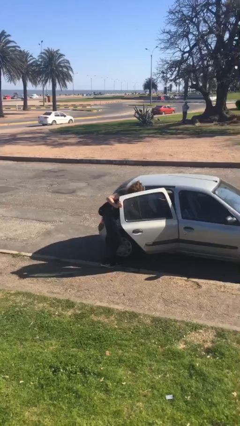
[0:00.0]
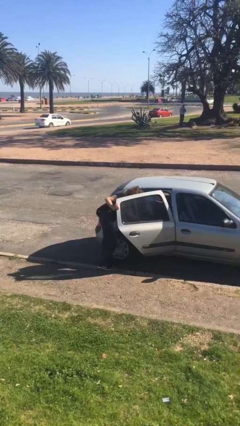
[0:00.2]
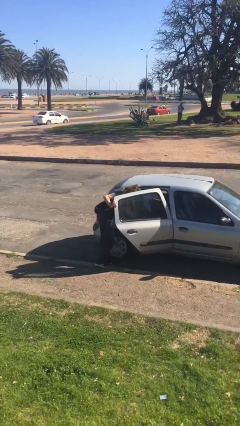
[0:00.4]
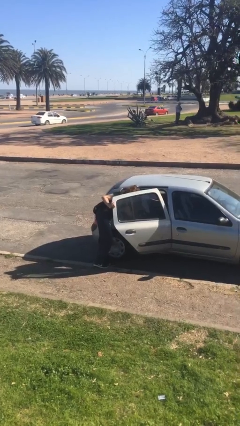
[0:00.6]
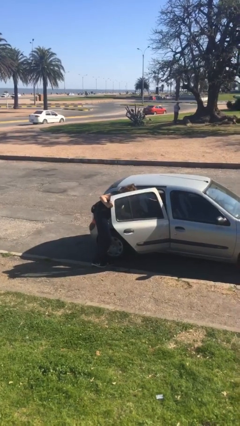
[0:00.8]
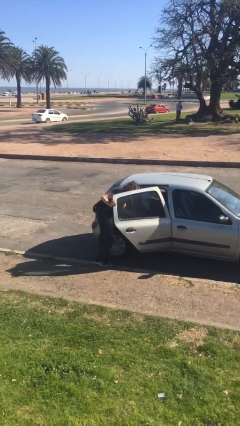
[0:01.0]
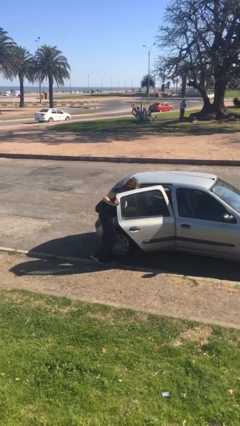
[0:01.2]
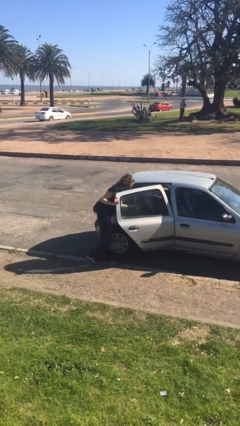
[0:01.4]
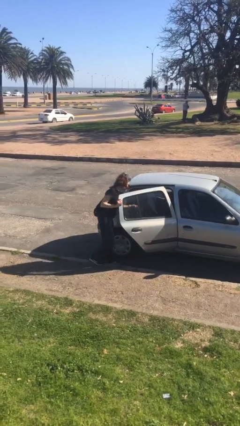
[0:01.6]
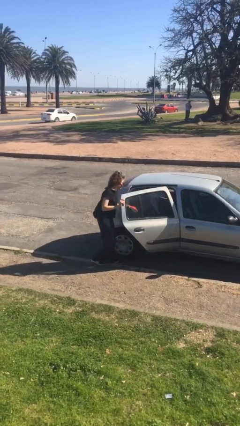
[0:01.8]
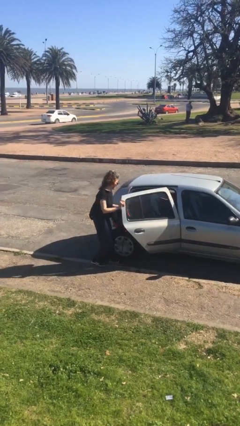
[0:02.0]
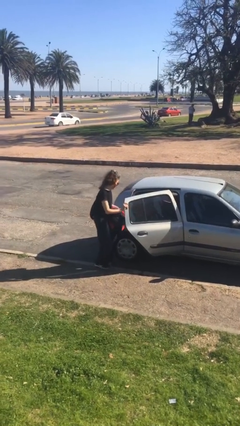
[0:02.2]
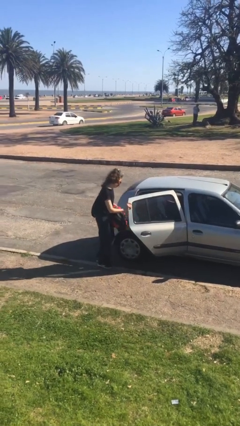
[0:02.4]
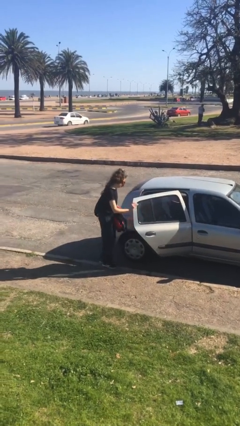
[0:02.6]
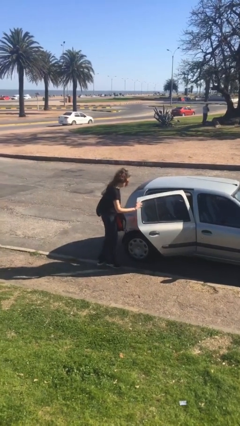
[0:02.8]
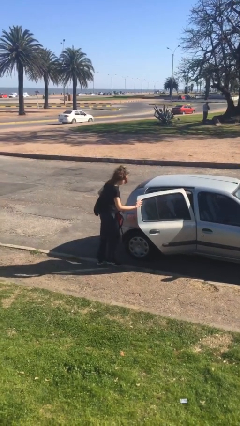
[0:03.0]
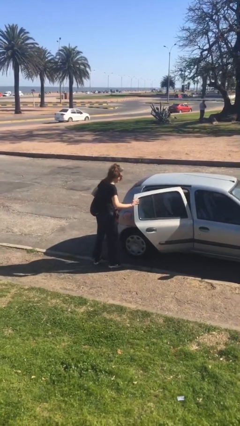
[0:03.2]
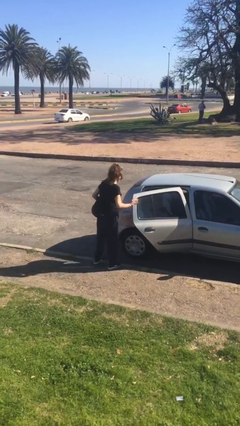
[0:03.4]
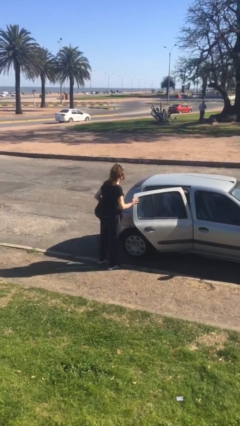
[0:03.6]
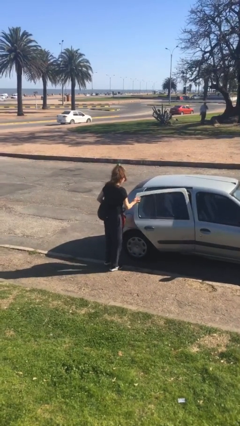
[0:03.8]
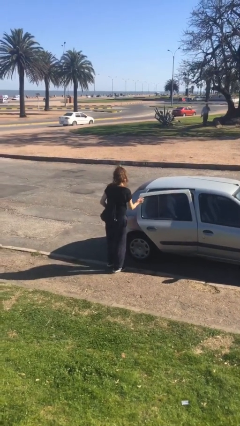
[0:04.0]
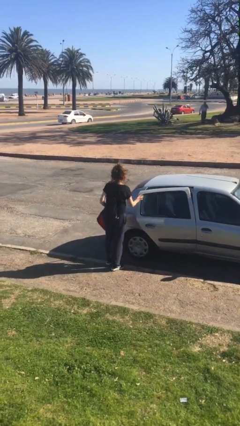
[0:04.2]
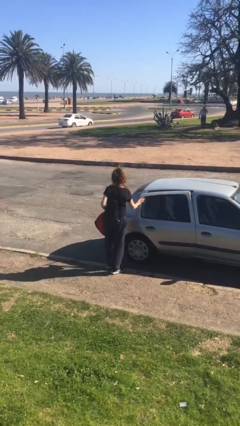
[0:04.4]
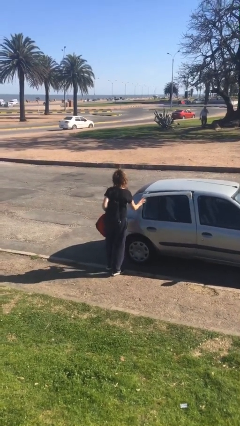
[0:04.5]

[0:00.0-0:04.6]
person unloads car

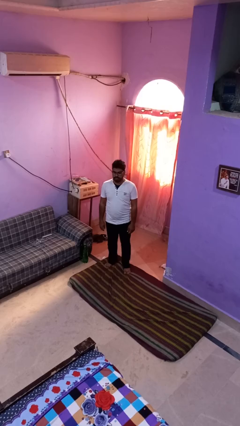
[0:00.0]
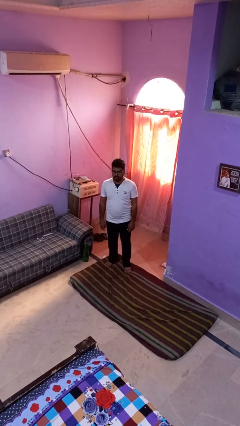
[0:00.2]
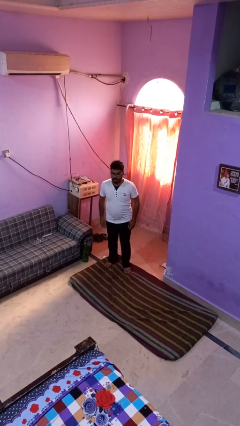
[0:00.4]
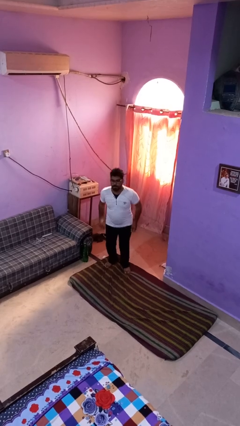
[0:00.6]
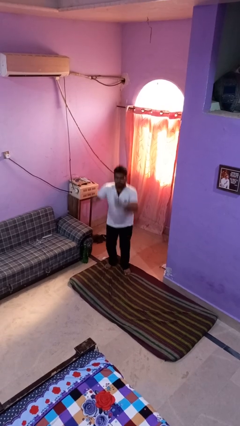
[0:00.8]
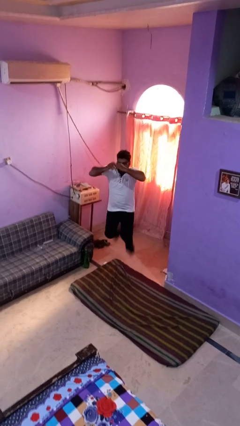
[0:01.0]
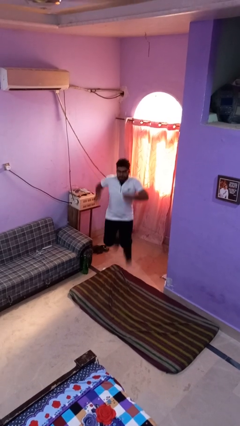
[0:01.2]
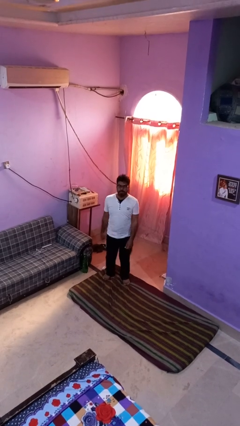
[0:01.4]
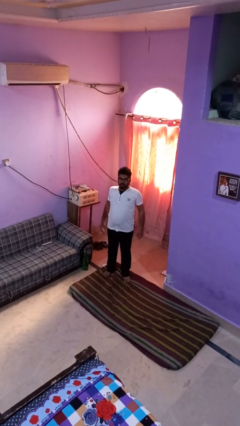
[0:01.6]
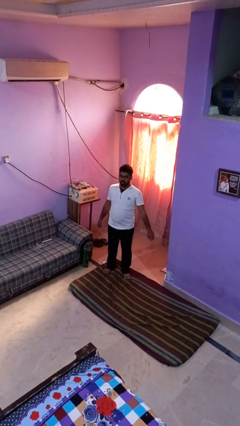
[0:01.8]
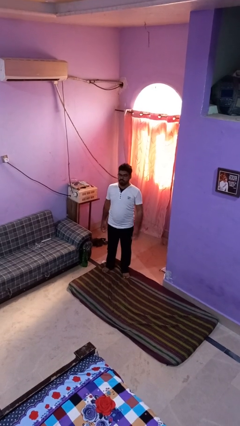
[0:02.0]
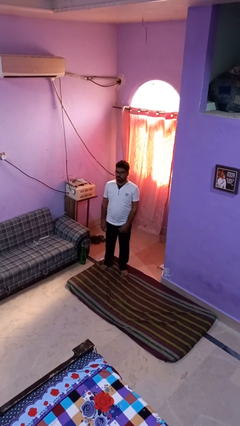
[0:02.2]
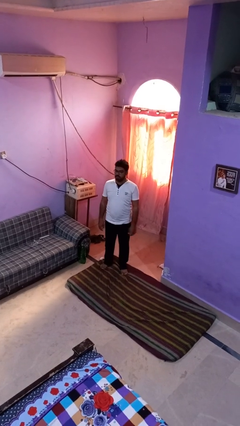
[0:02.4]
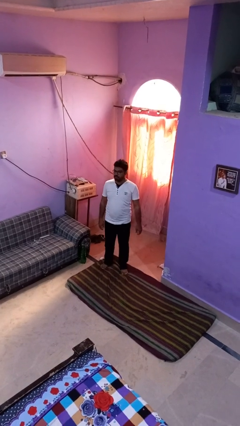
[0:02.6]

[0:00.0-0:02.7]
person jumps

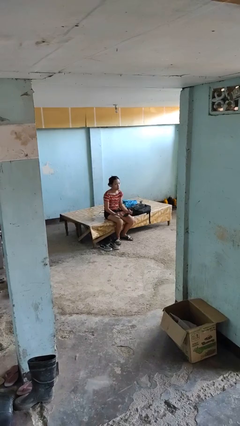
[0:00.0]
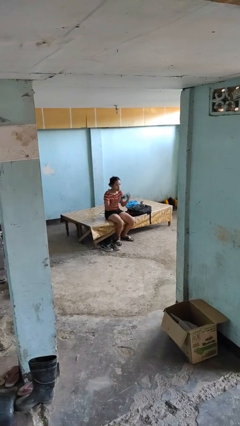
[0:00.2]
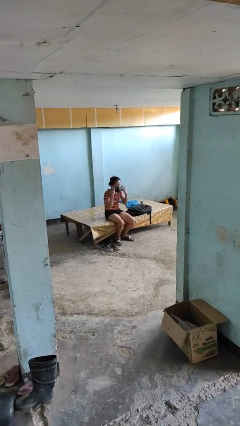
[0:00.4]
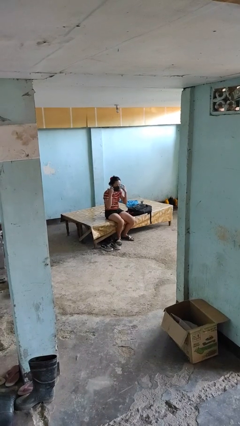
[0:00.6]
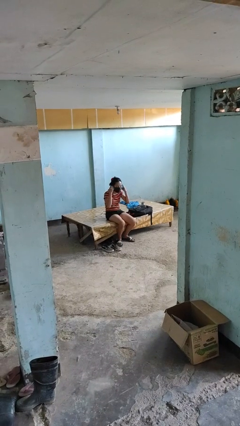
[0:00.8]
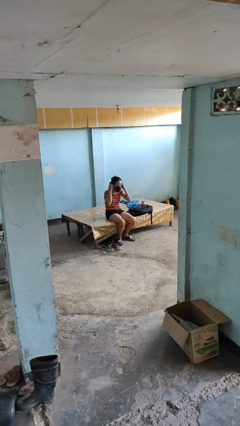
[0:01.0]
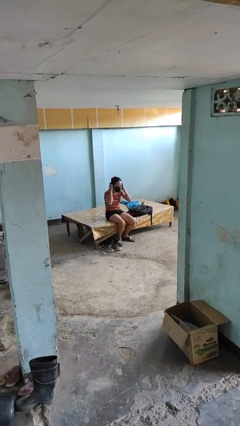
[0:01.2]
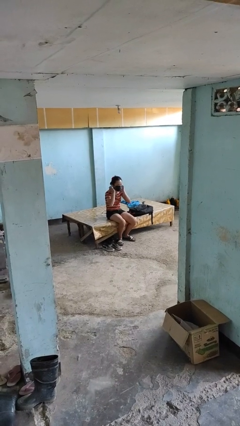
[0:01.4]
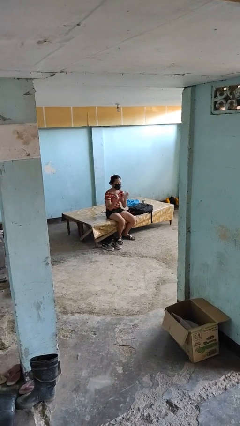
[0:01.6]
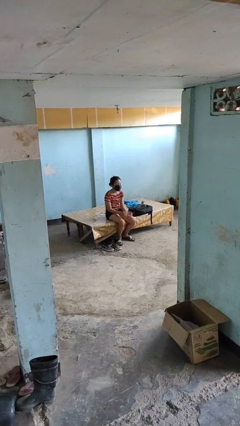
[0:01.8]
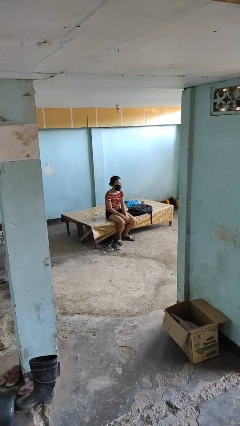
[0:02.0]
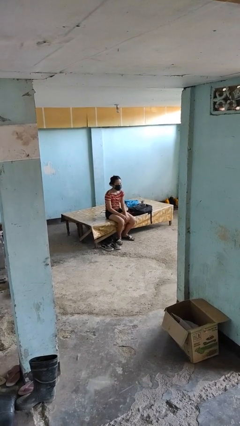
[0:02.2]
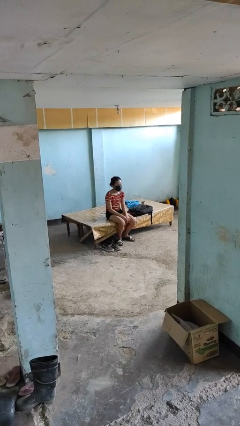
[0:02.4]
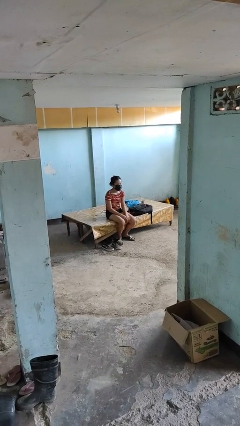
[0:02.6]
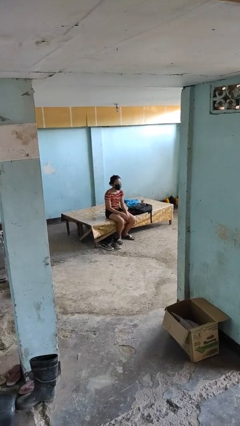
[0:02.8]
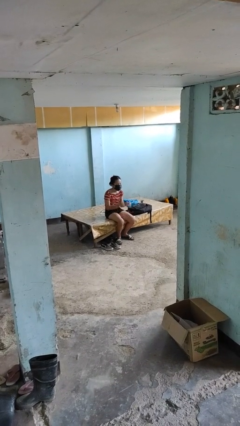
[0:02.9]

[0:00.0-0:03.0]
person puts on facemask

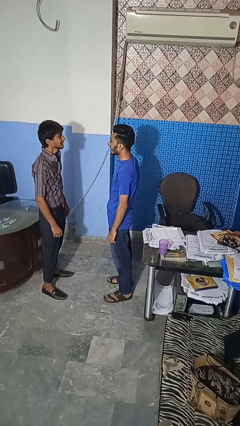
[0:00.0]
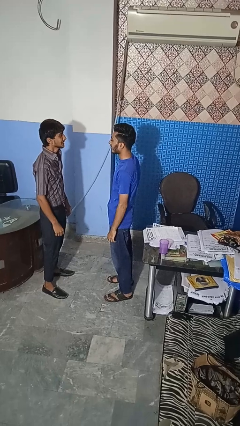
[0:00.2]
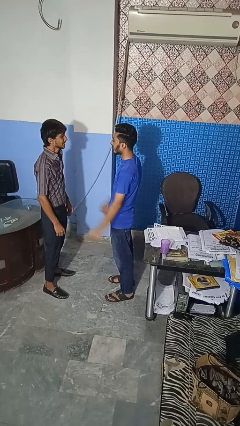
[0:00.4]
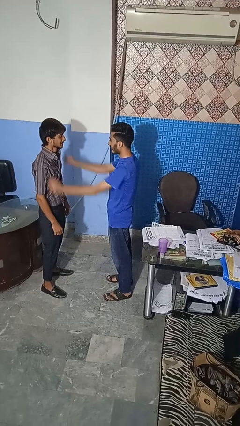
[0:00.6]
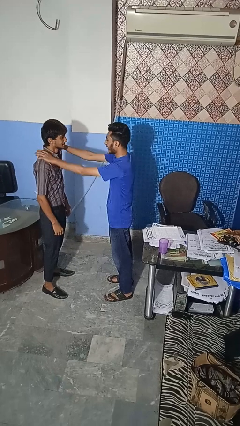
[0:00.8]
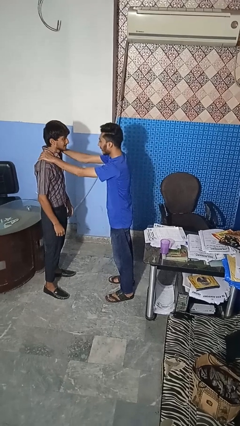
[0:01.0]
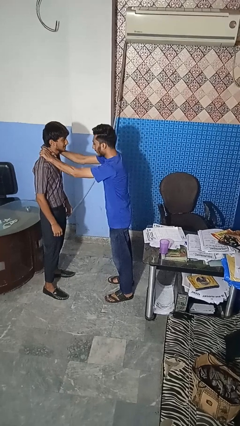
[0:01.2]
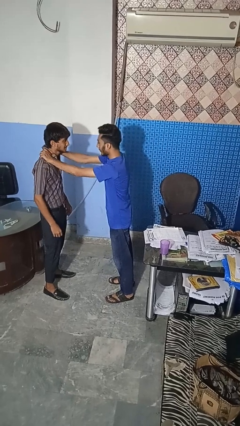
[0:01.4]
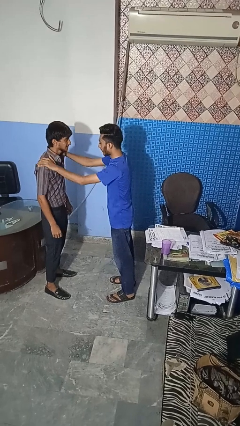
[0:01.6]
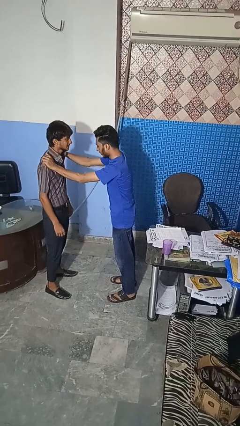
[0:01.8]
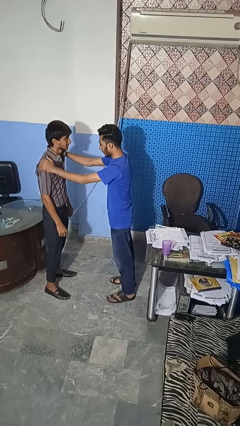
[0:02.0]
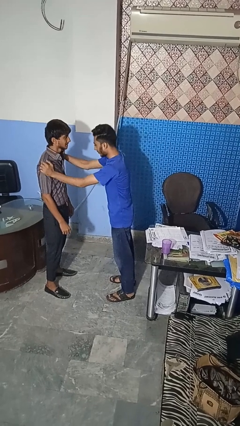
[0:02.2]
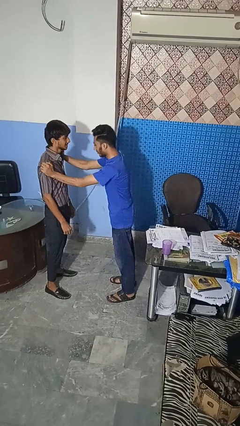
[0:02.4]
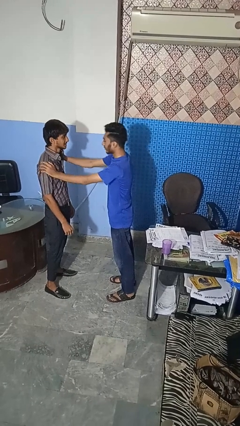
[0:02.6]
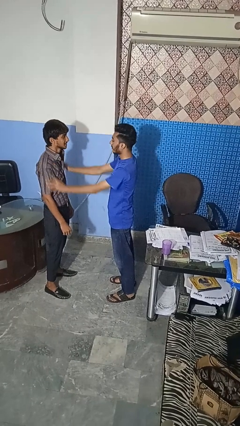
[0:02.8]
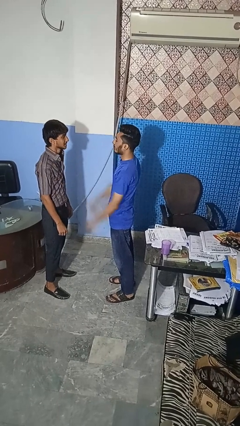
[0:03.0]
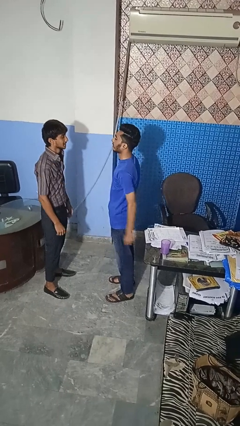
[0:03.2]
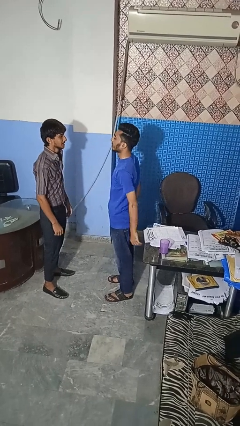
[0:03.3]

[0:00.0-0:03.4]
person pounds shoulders of person

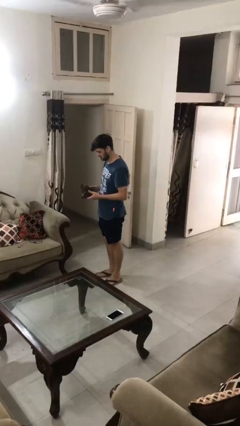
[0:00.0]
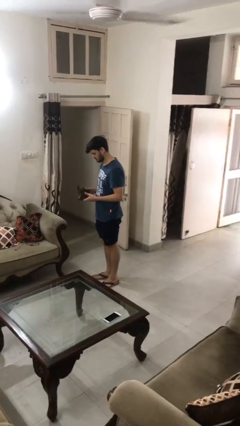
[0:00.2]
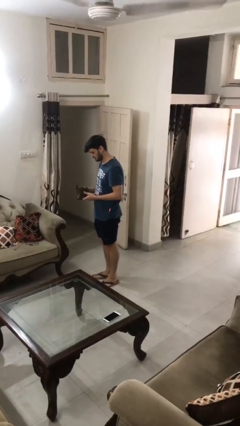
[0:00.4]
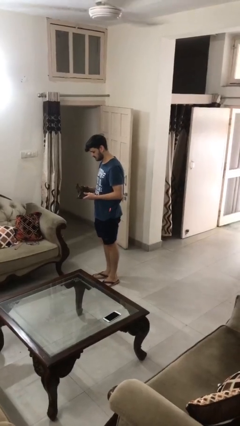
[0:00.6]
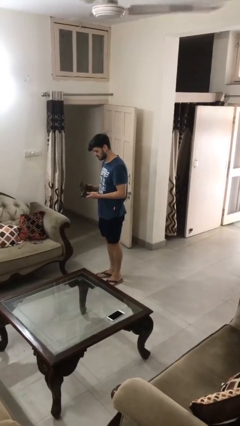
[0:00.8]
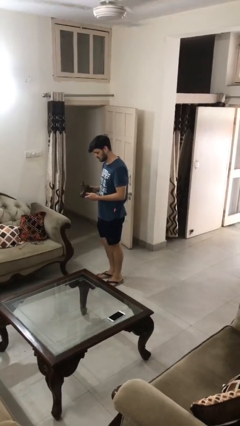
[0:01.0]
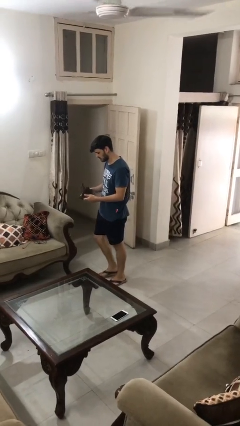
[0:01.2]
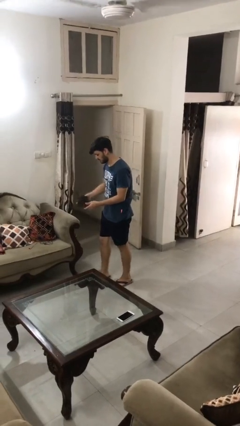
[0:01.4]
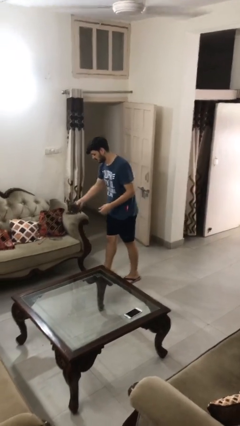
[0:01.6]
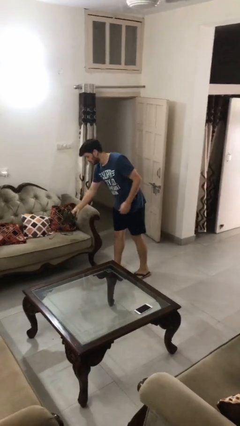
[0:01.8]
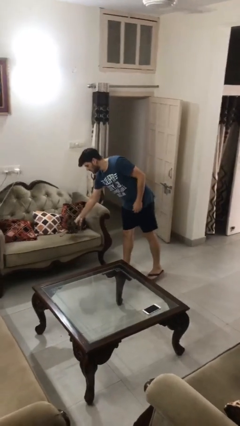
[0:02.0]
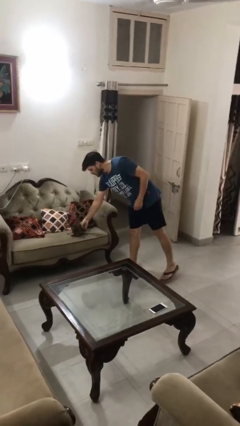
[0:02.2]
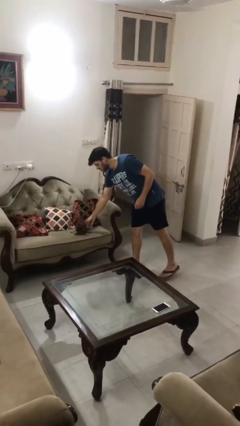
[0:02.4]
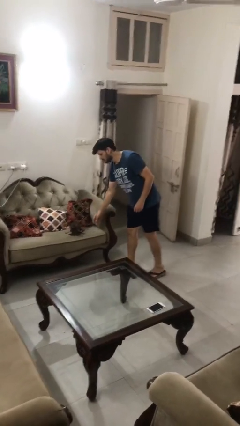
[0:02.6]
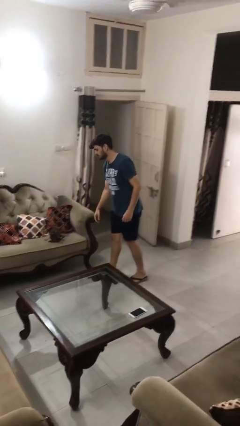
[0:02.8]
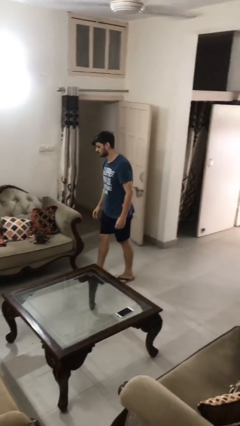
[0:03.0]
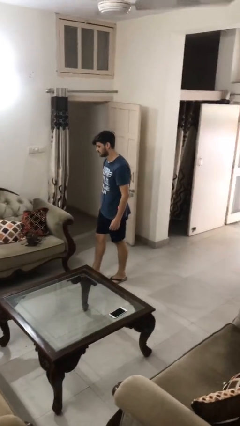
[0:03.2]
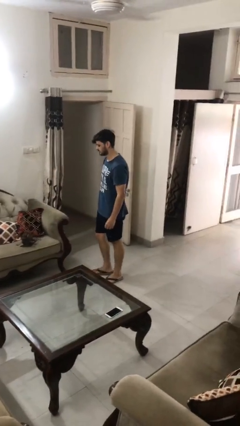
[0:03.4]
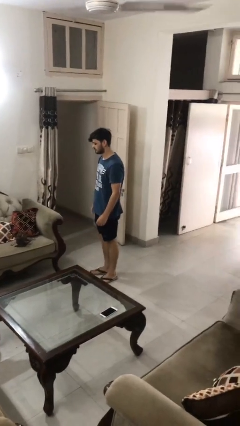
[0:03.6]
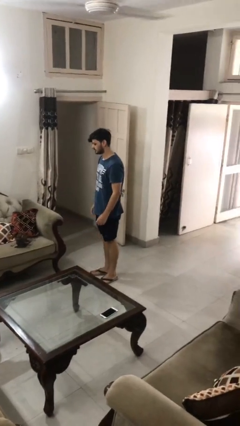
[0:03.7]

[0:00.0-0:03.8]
person puts down object on couch

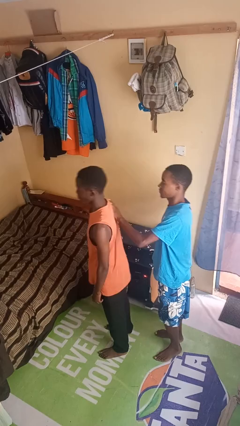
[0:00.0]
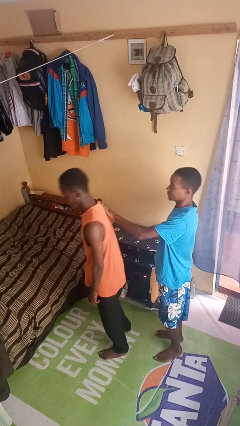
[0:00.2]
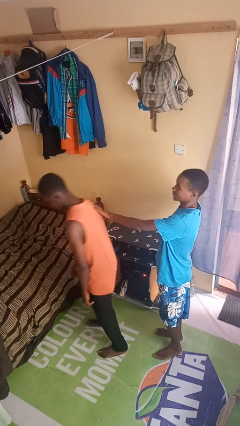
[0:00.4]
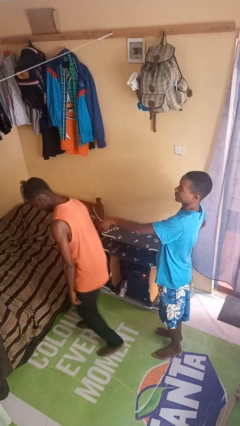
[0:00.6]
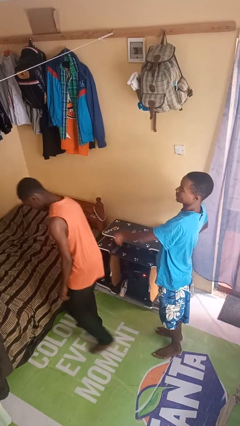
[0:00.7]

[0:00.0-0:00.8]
person shoves person
